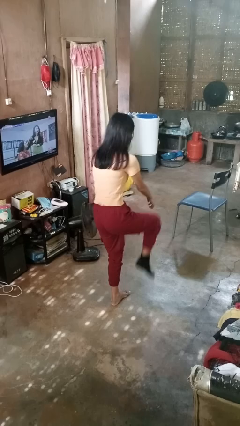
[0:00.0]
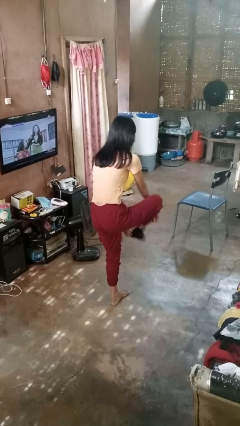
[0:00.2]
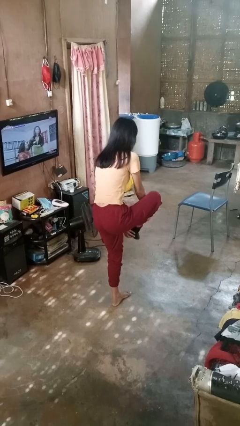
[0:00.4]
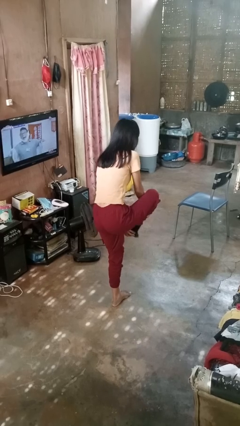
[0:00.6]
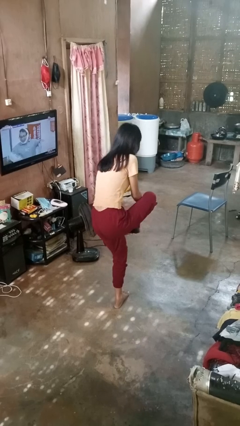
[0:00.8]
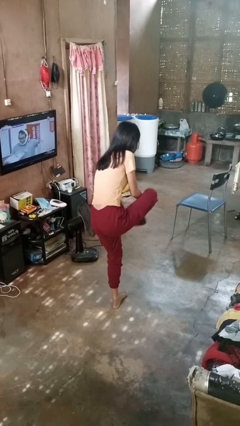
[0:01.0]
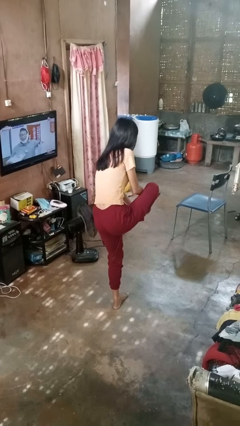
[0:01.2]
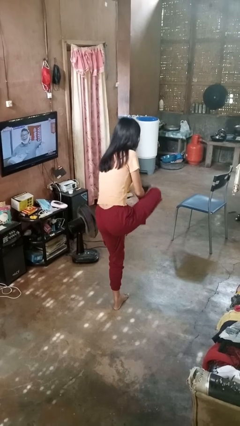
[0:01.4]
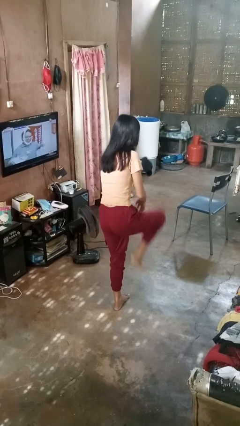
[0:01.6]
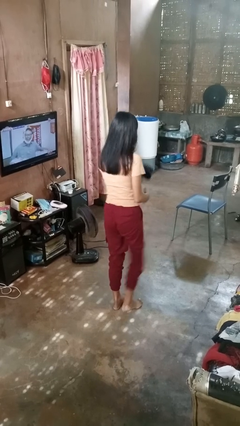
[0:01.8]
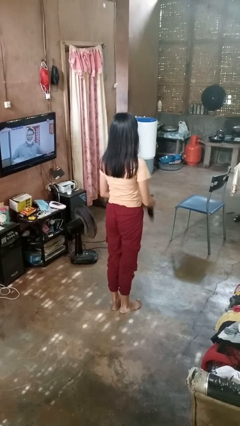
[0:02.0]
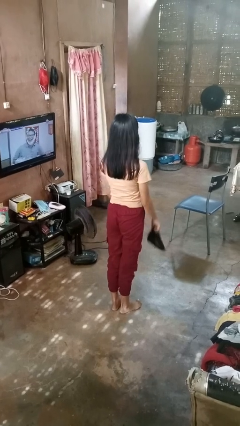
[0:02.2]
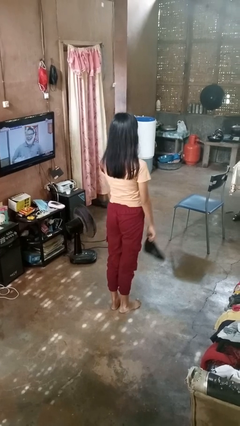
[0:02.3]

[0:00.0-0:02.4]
person takes off socks

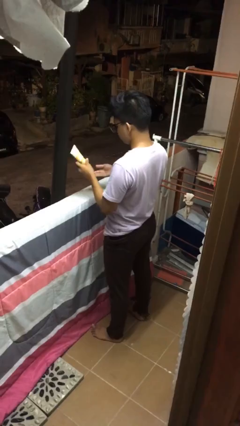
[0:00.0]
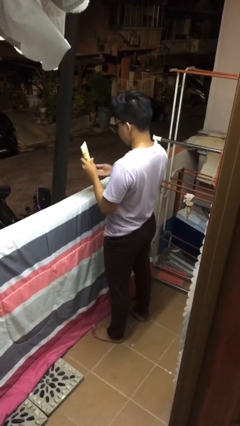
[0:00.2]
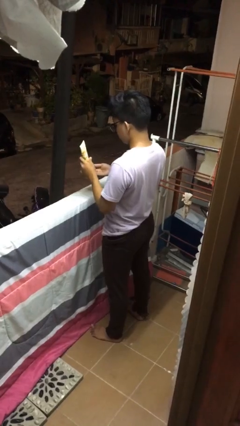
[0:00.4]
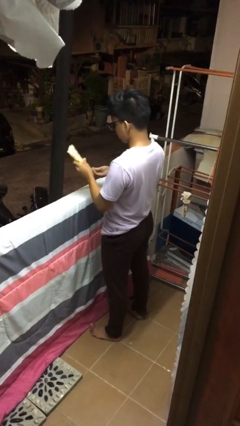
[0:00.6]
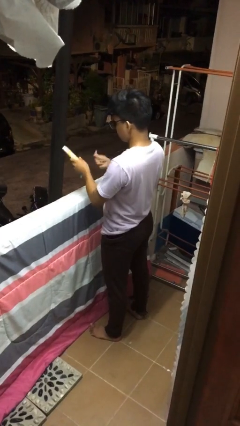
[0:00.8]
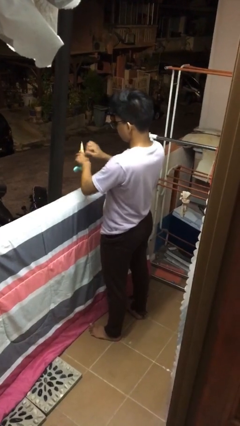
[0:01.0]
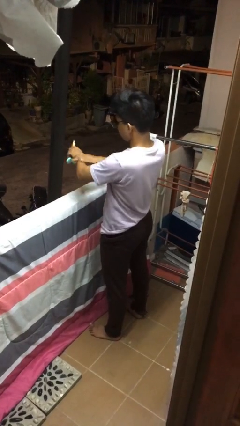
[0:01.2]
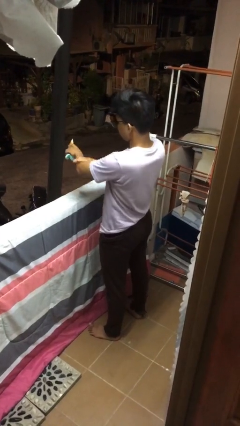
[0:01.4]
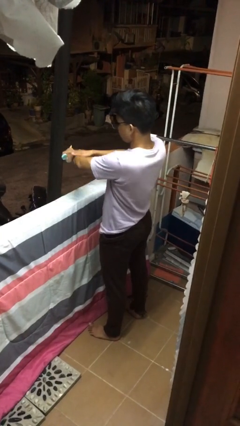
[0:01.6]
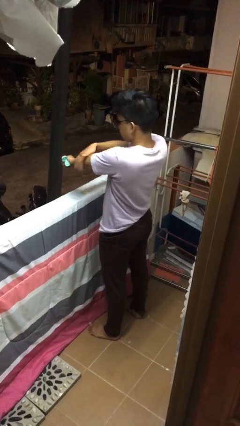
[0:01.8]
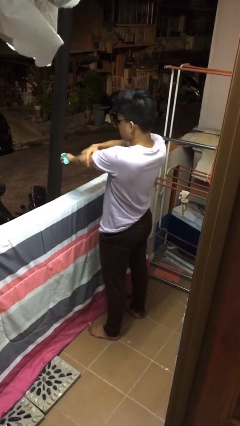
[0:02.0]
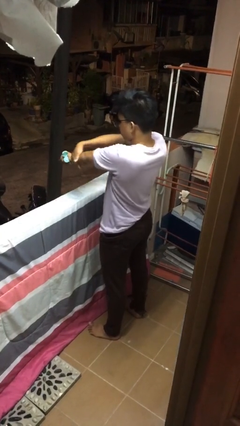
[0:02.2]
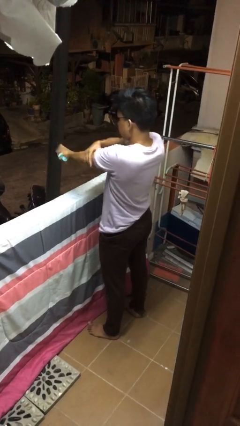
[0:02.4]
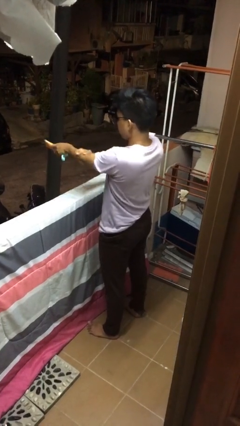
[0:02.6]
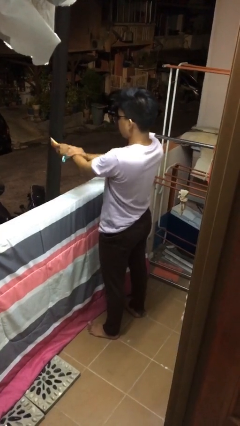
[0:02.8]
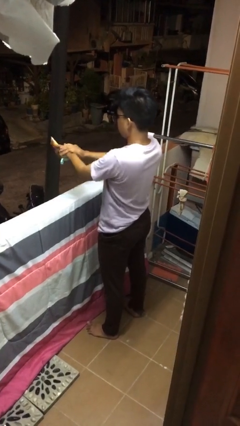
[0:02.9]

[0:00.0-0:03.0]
person applies sunscreen

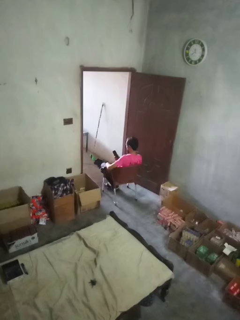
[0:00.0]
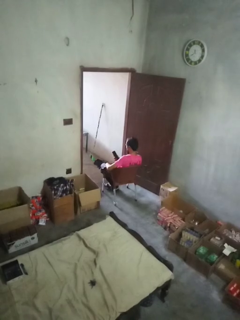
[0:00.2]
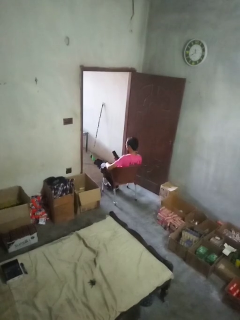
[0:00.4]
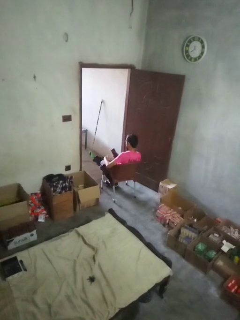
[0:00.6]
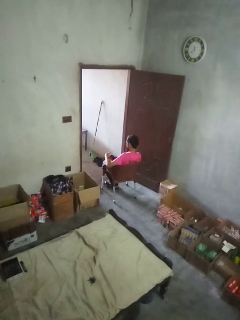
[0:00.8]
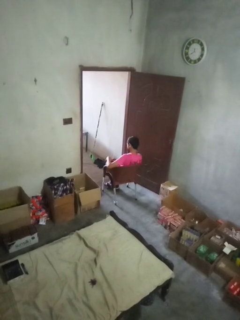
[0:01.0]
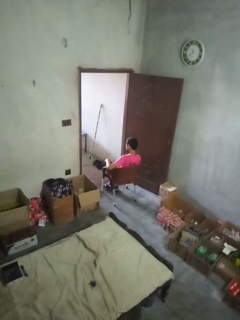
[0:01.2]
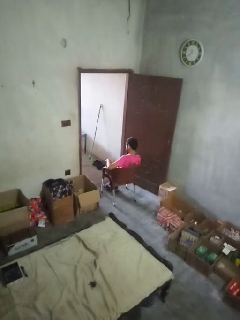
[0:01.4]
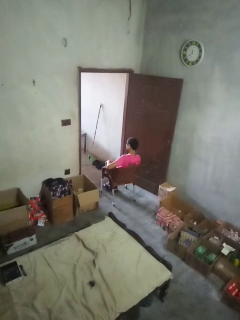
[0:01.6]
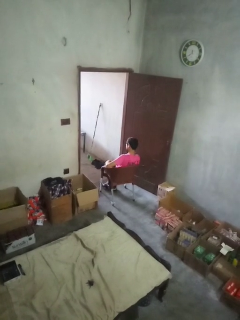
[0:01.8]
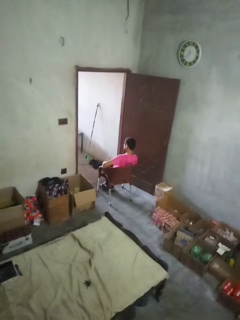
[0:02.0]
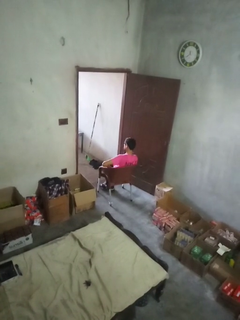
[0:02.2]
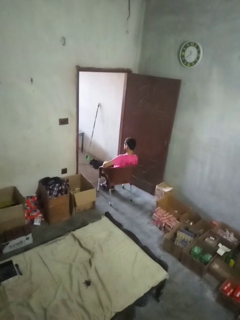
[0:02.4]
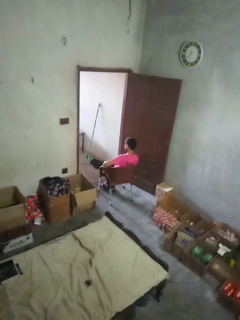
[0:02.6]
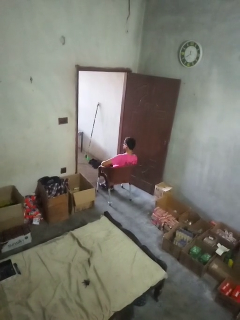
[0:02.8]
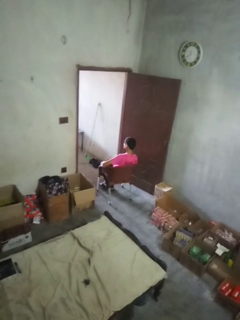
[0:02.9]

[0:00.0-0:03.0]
person puts phone into pocket

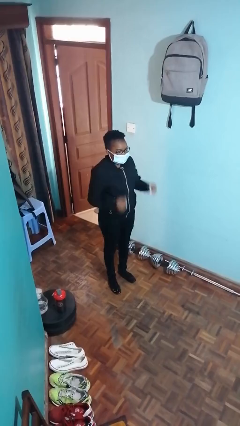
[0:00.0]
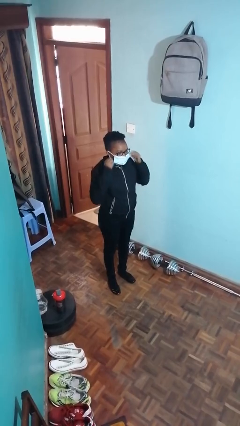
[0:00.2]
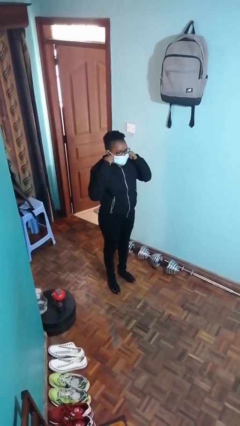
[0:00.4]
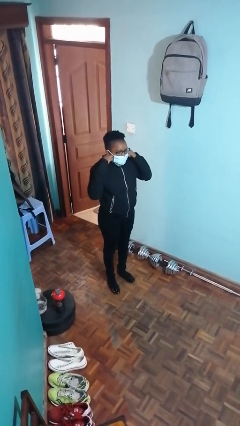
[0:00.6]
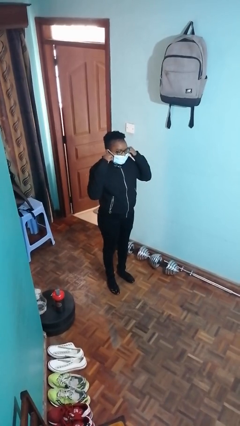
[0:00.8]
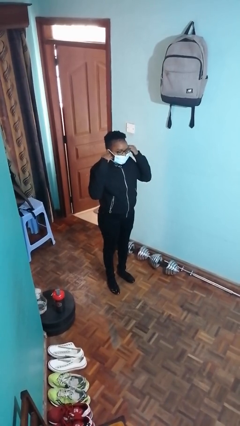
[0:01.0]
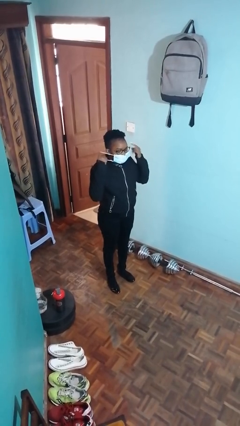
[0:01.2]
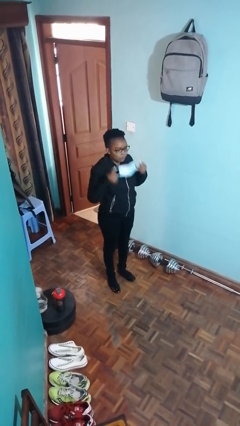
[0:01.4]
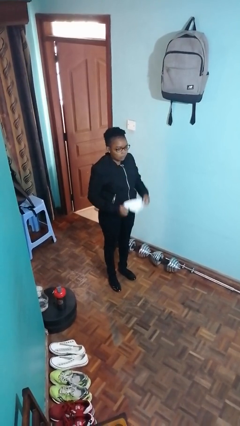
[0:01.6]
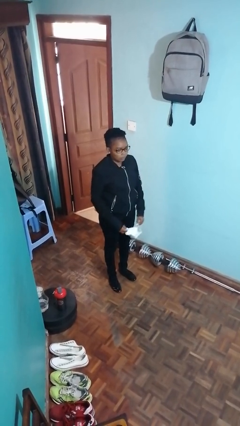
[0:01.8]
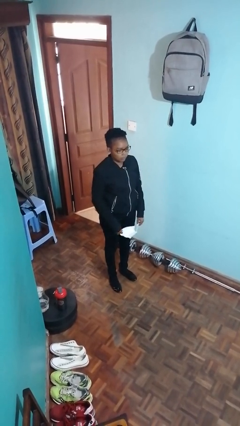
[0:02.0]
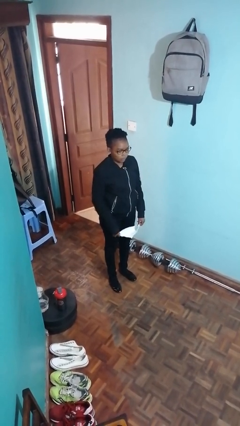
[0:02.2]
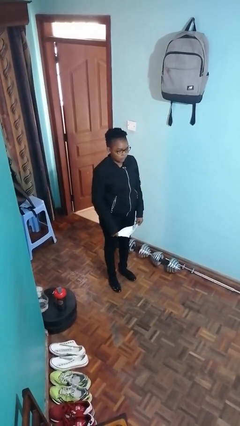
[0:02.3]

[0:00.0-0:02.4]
person takes off facemask

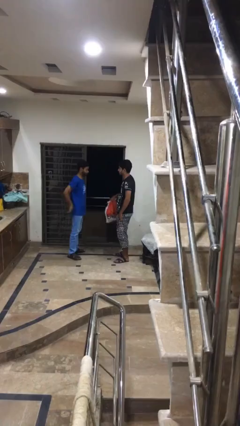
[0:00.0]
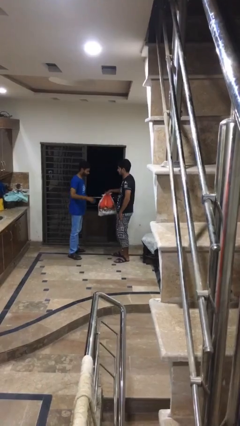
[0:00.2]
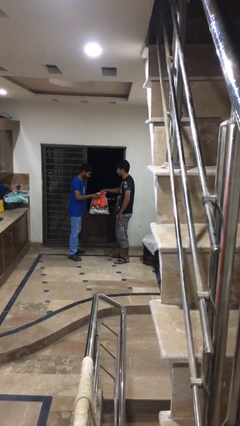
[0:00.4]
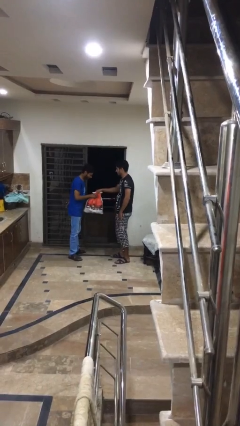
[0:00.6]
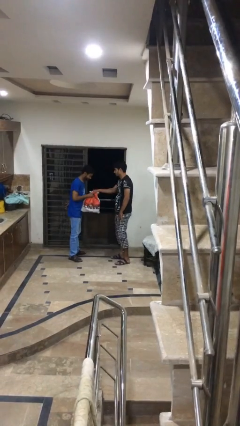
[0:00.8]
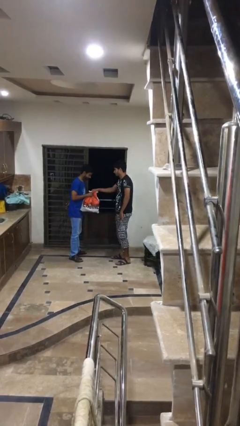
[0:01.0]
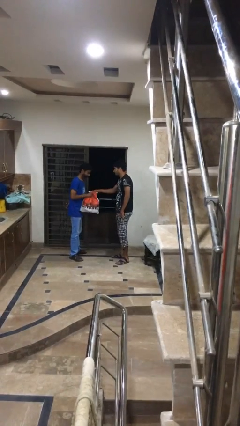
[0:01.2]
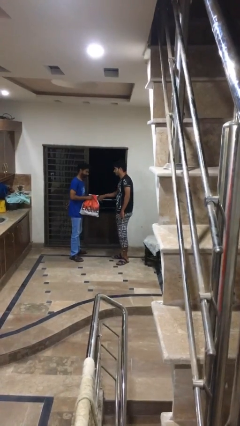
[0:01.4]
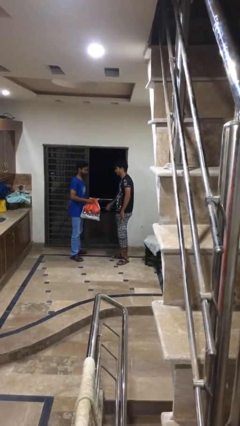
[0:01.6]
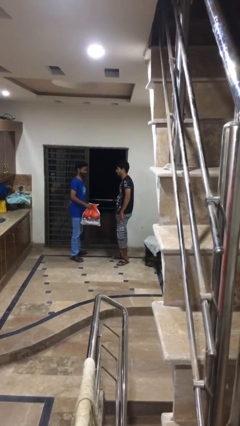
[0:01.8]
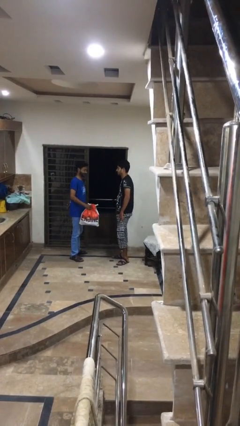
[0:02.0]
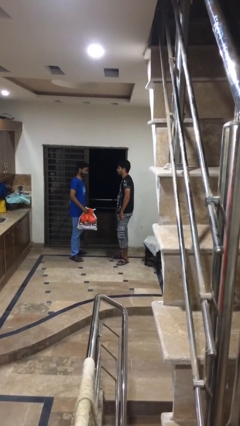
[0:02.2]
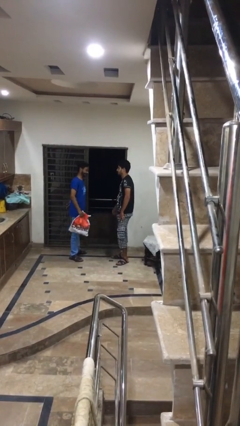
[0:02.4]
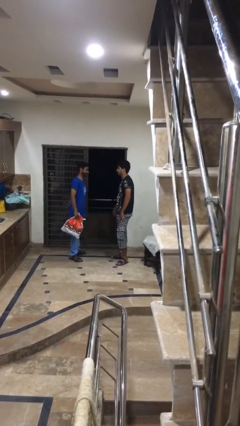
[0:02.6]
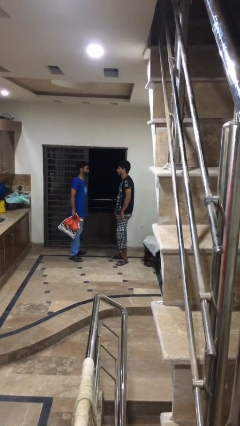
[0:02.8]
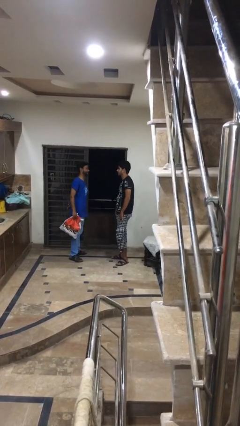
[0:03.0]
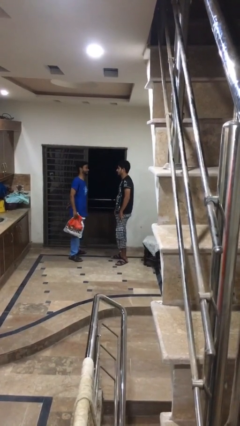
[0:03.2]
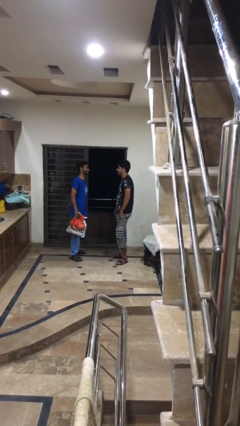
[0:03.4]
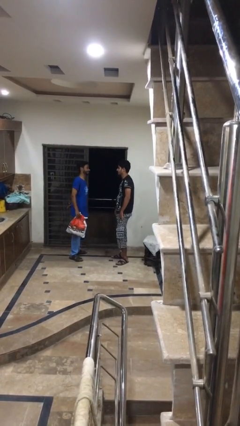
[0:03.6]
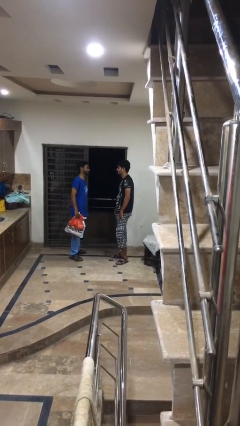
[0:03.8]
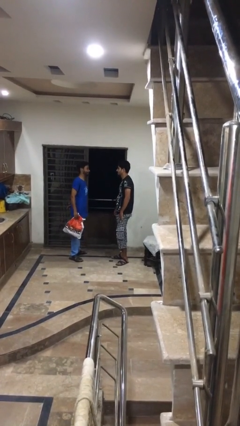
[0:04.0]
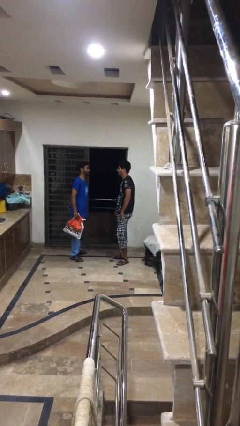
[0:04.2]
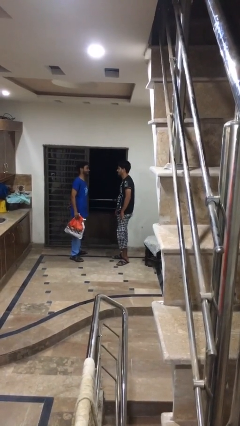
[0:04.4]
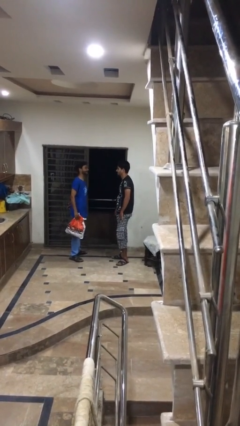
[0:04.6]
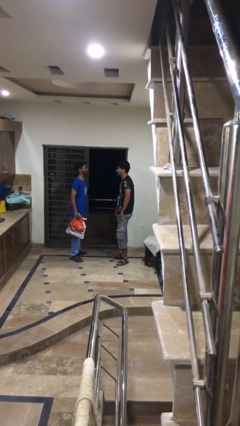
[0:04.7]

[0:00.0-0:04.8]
person transfers object to person

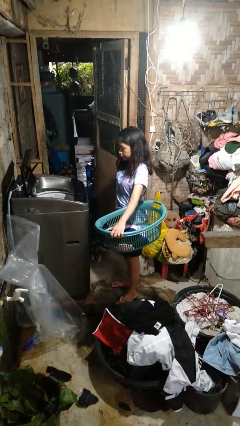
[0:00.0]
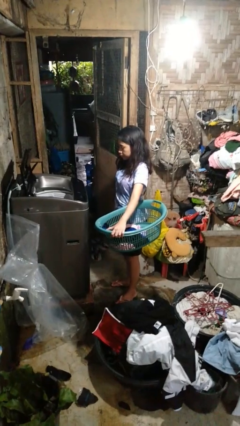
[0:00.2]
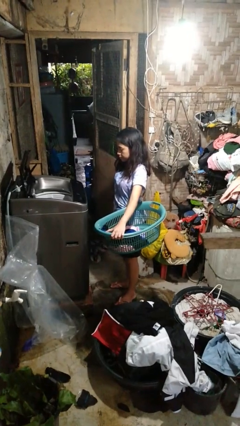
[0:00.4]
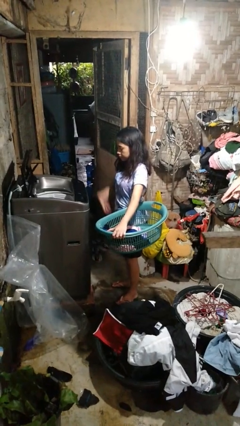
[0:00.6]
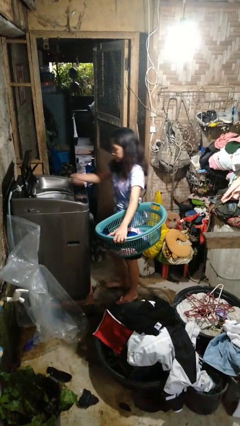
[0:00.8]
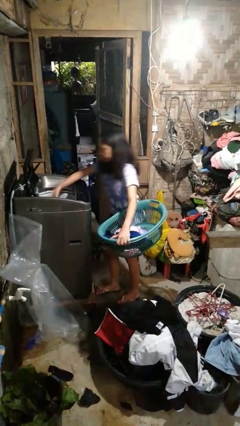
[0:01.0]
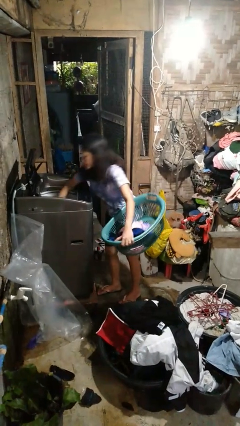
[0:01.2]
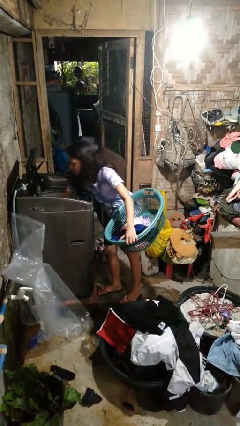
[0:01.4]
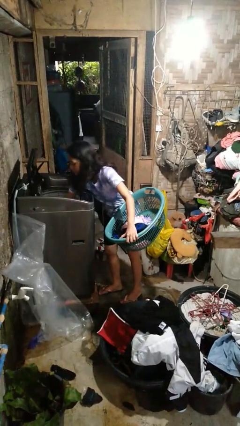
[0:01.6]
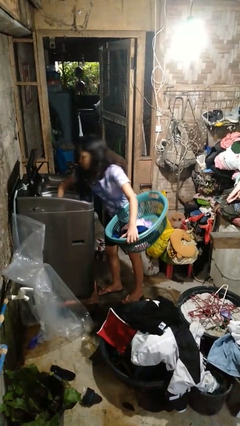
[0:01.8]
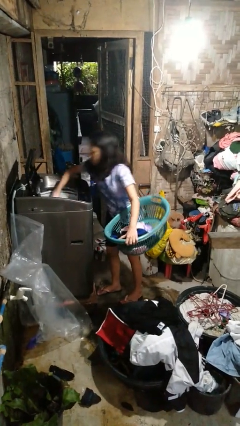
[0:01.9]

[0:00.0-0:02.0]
person unloads dryer

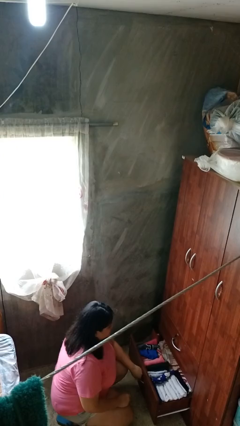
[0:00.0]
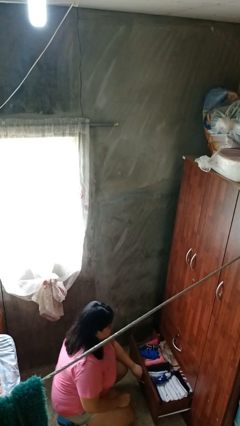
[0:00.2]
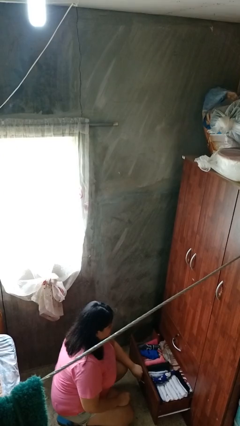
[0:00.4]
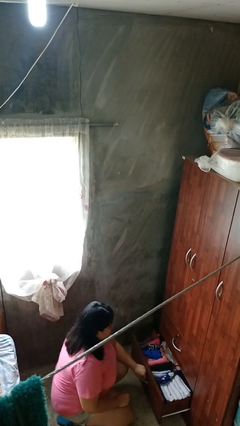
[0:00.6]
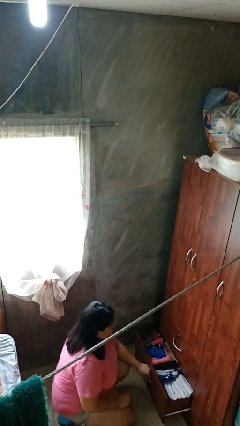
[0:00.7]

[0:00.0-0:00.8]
person closes dresser drawer
